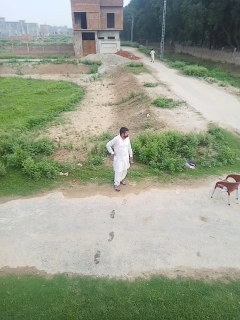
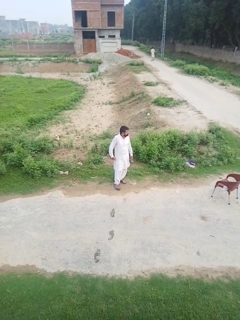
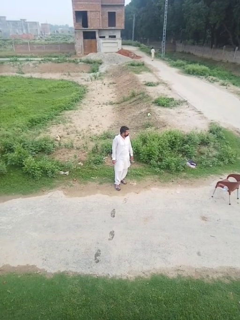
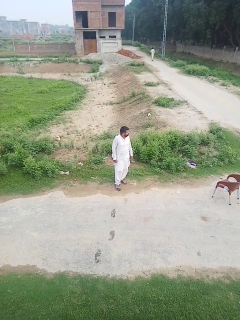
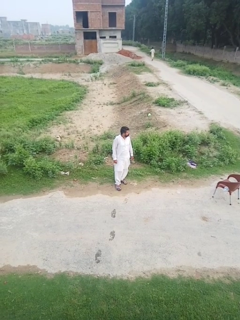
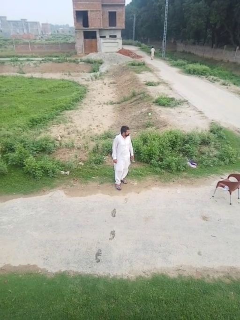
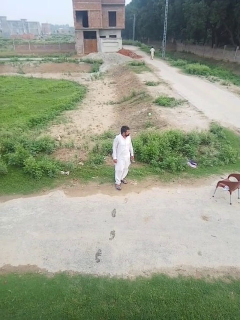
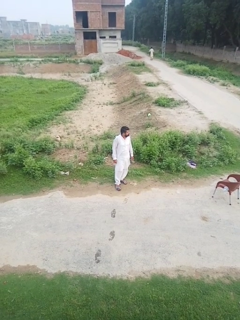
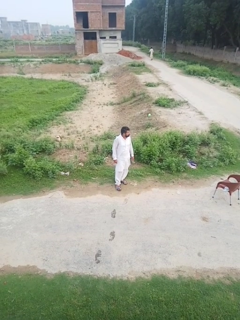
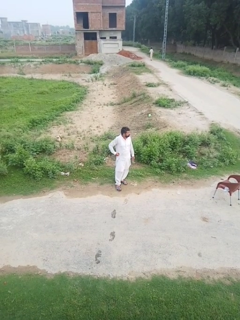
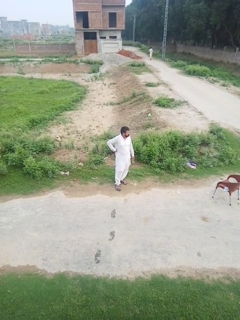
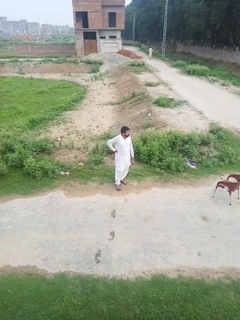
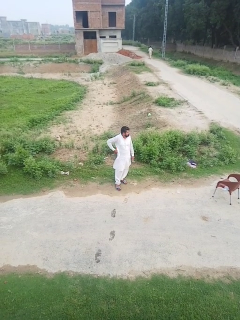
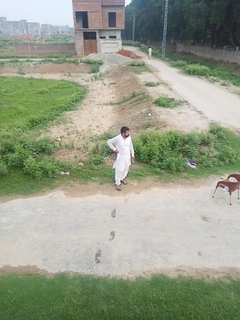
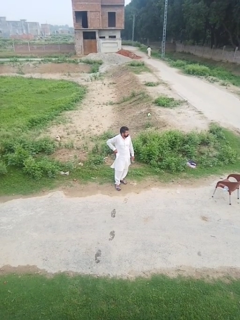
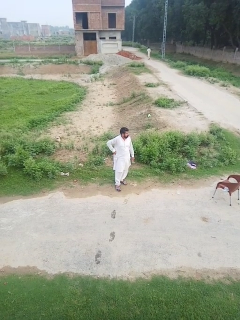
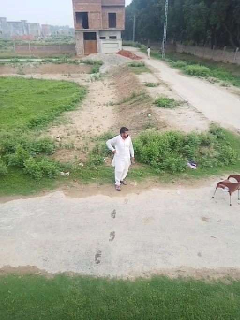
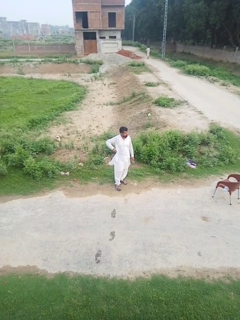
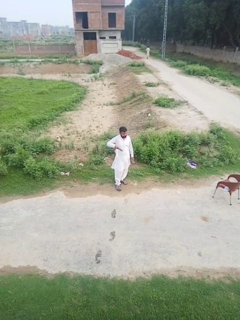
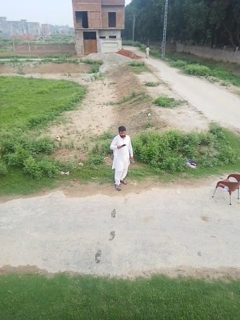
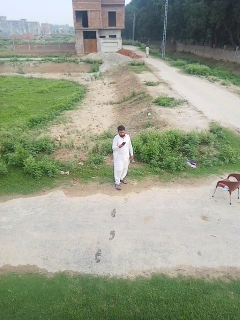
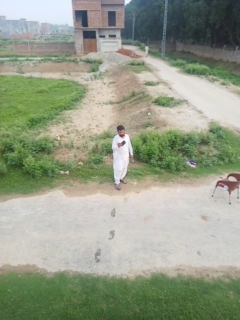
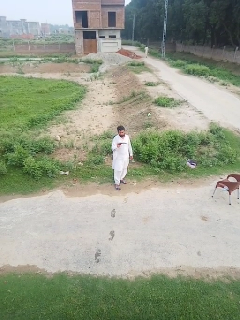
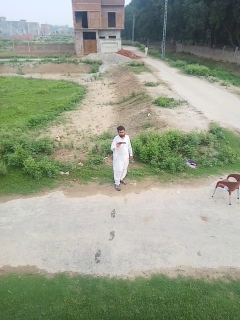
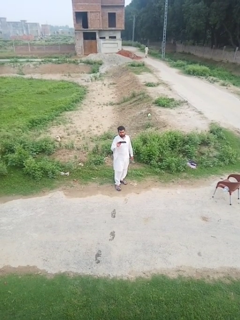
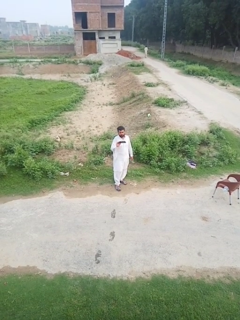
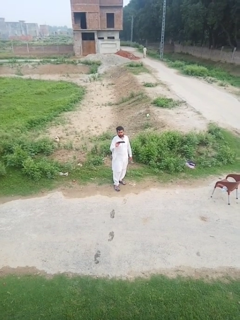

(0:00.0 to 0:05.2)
person takes phone from pocket

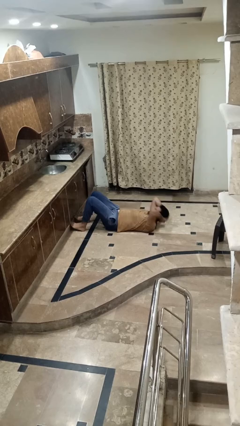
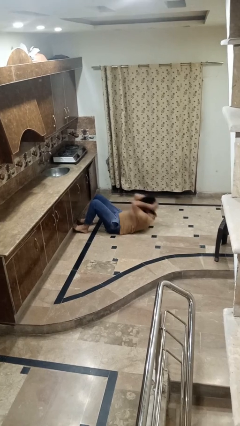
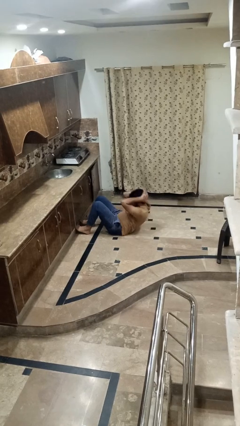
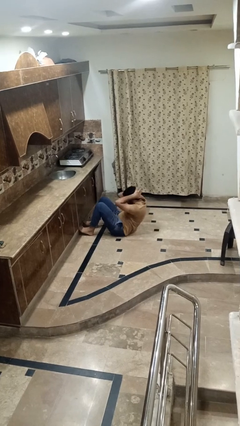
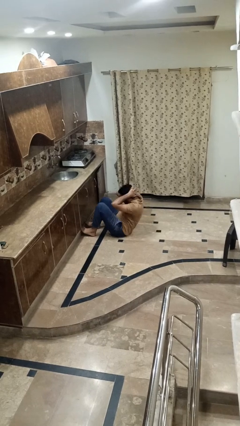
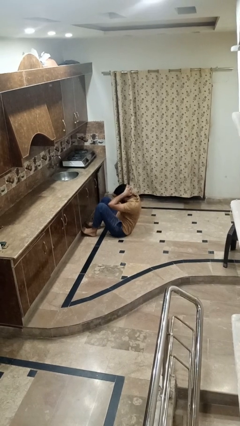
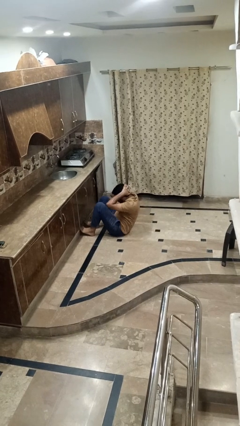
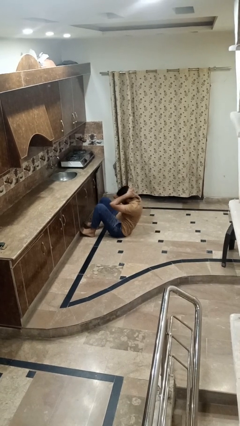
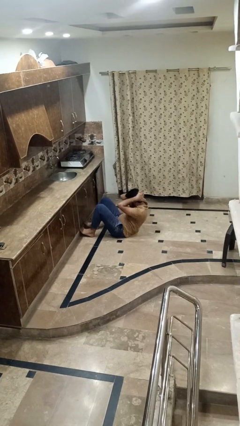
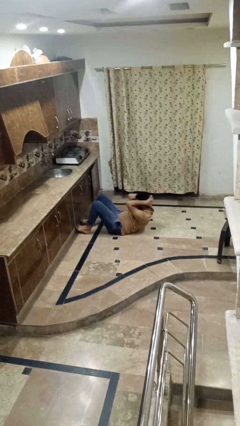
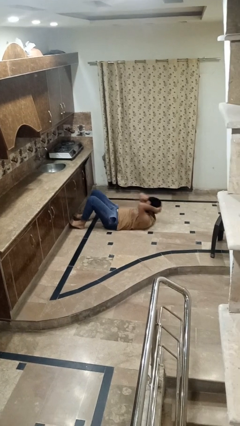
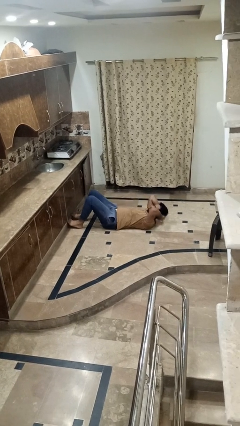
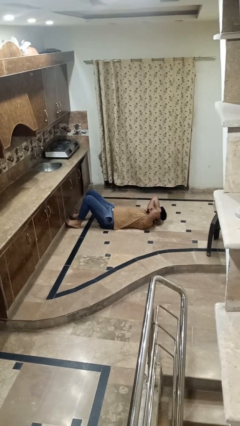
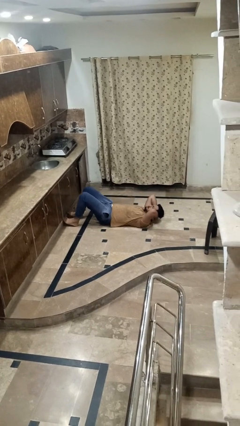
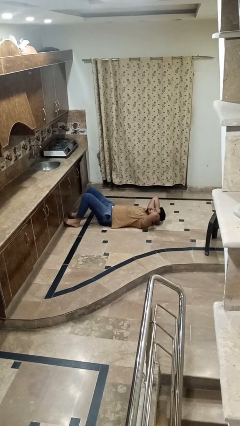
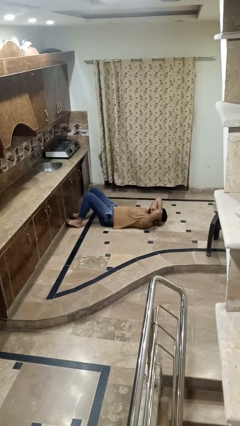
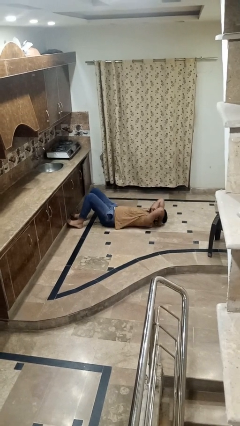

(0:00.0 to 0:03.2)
person exercises with situp

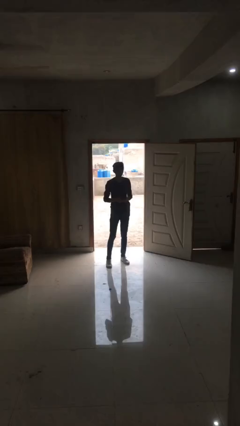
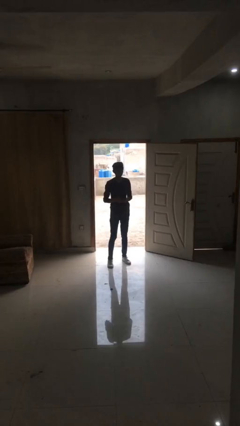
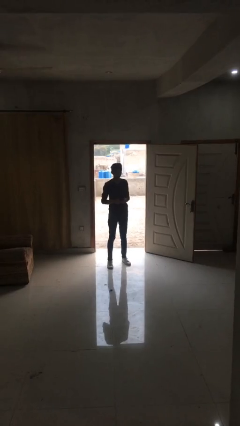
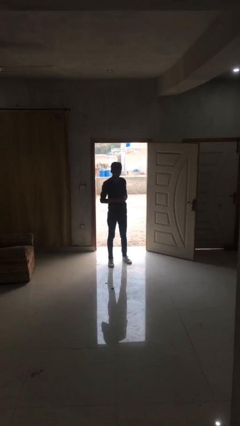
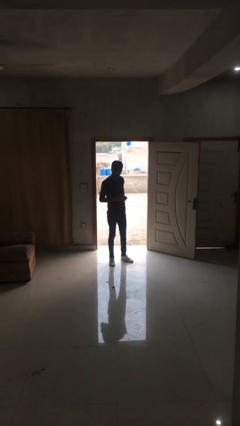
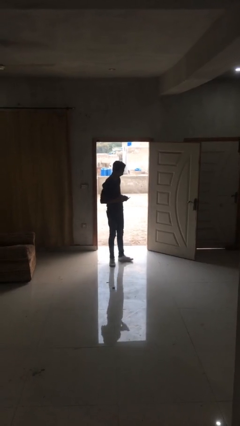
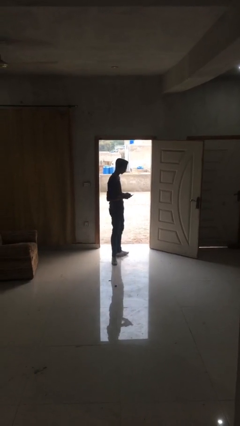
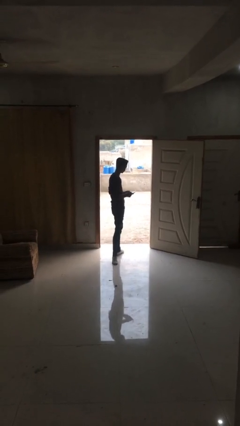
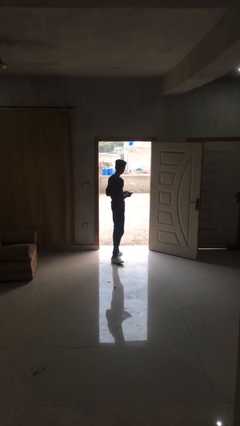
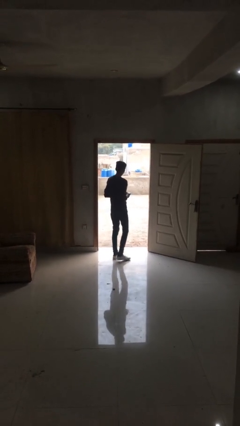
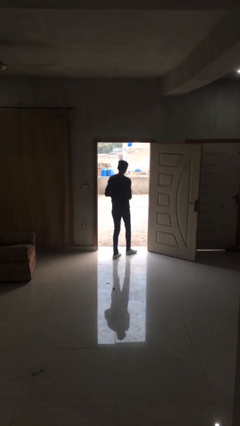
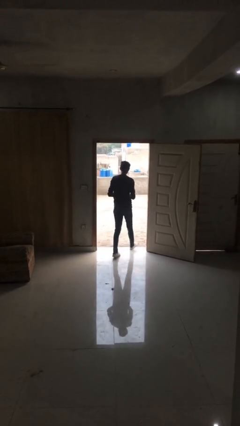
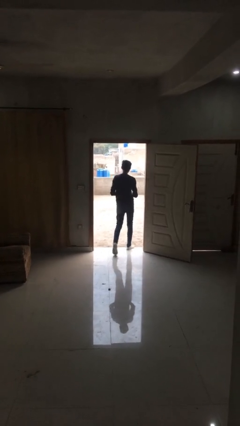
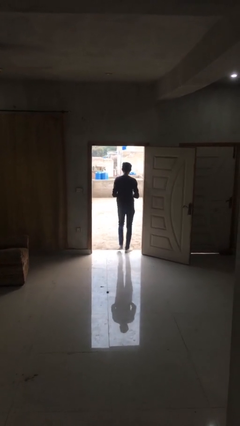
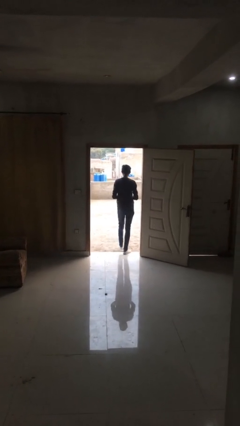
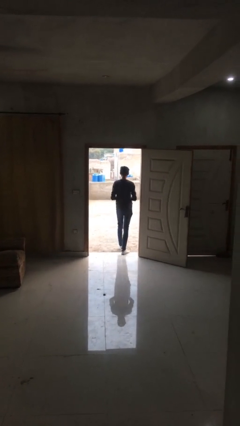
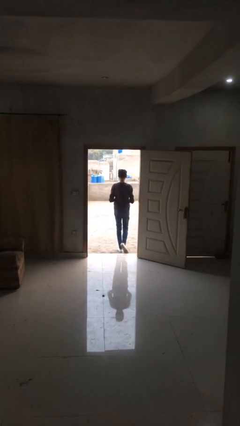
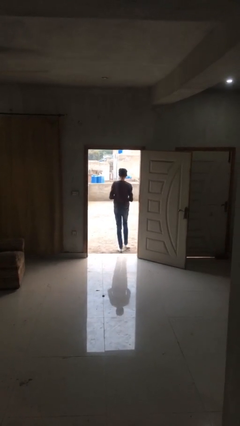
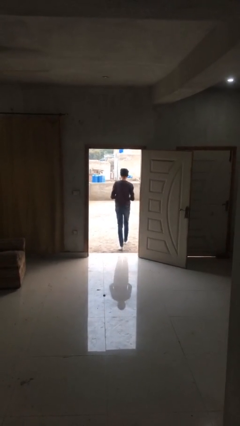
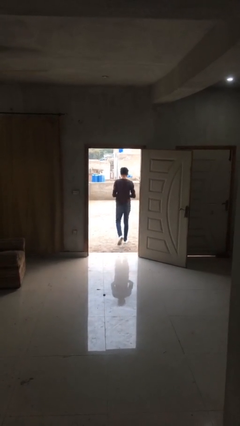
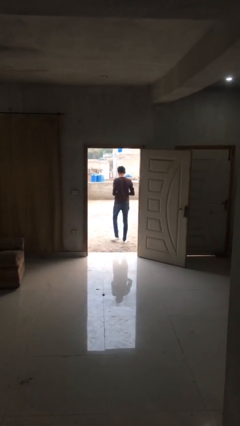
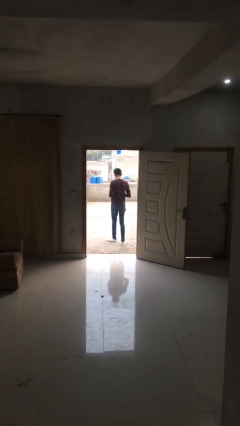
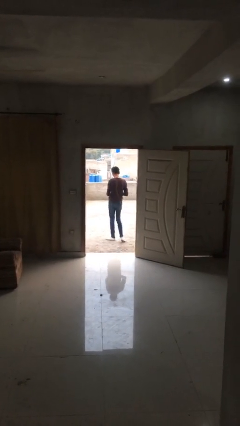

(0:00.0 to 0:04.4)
person exits scene through structure

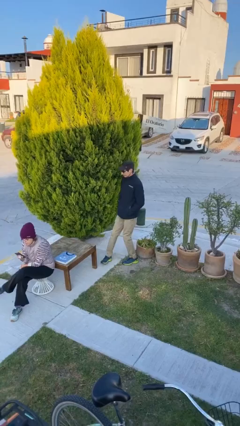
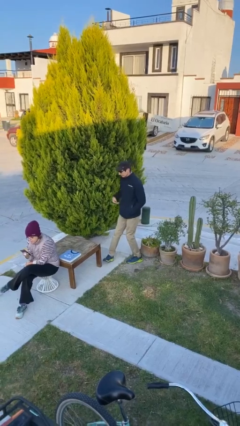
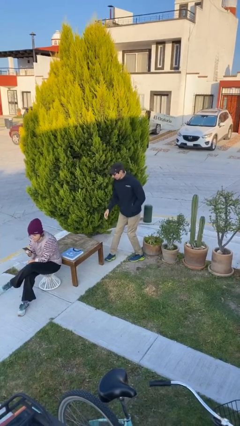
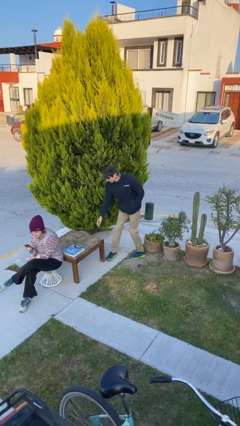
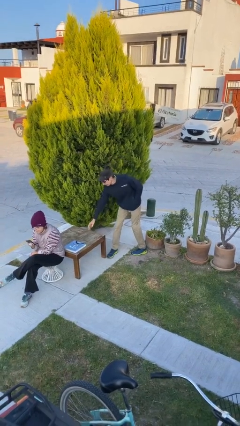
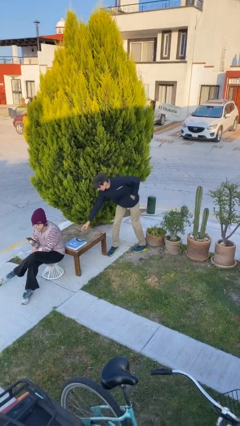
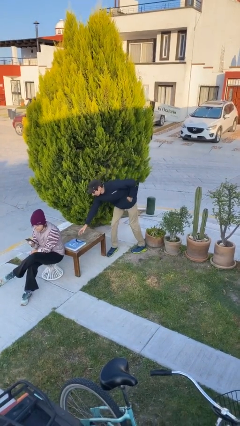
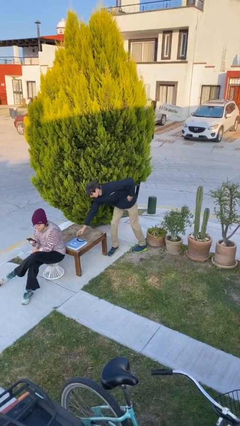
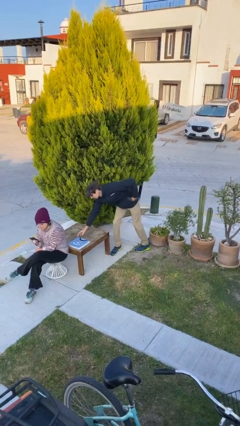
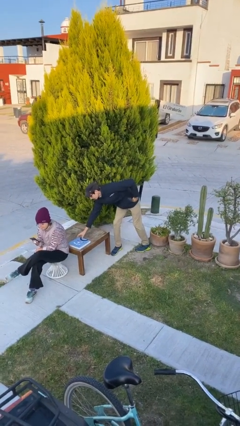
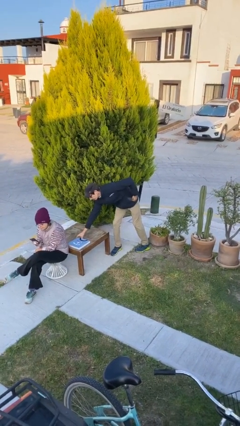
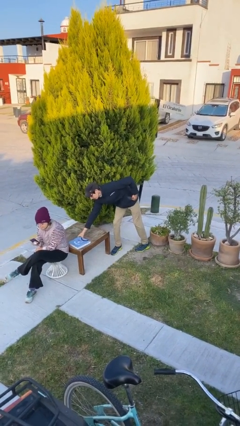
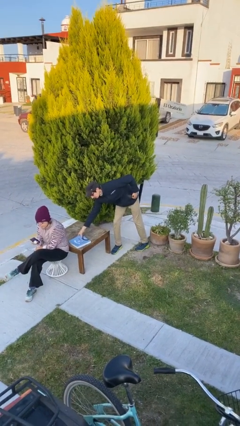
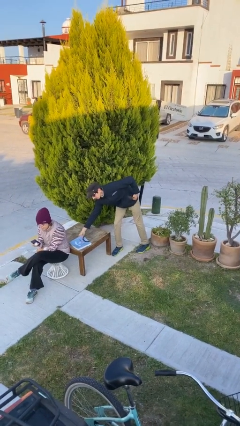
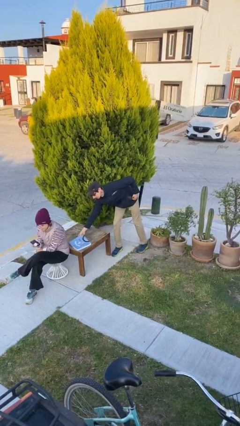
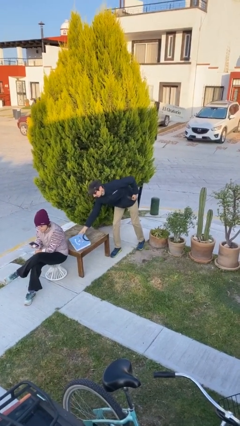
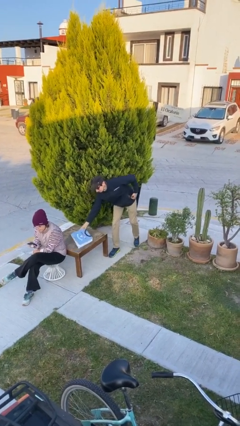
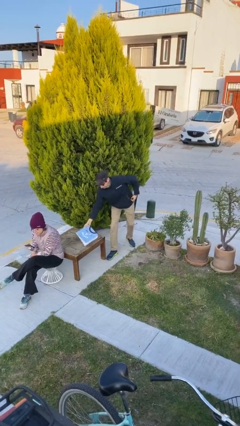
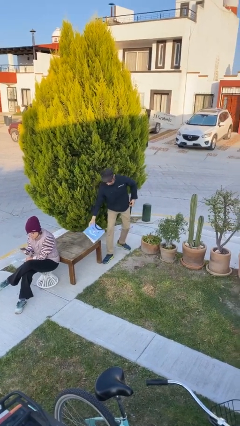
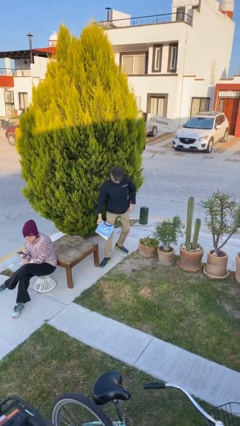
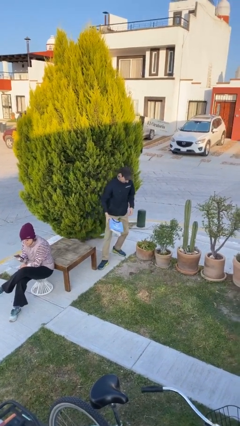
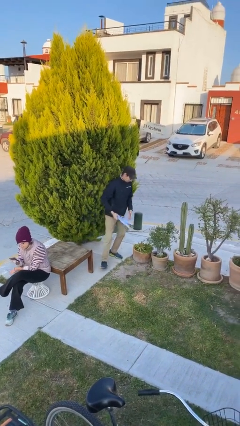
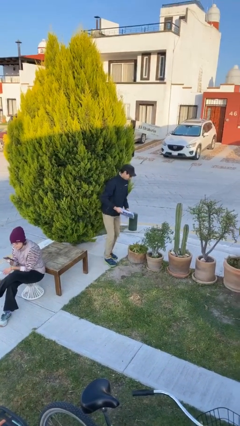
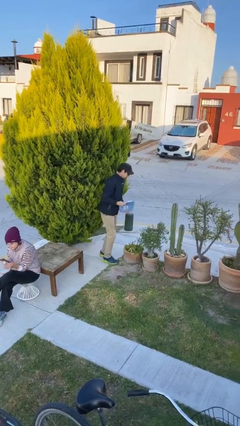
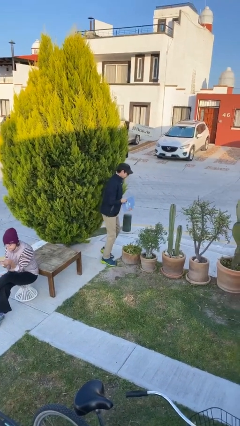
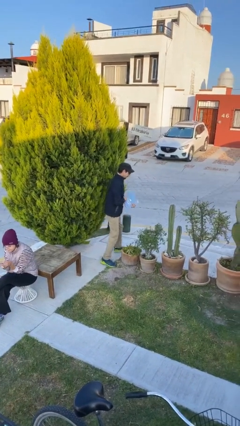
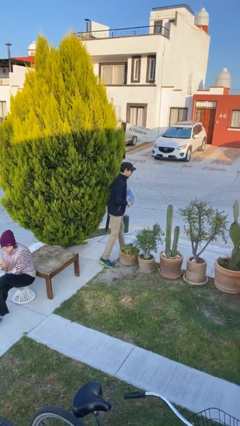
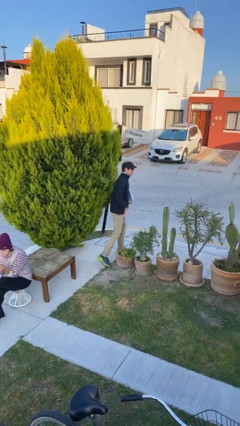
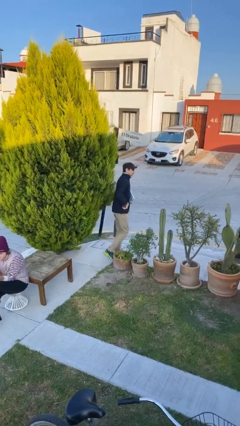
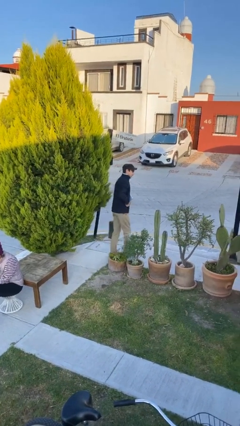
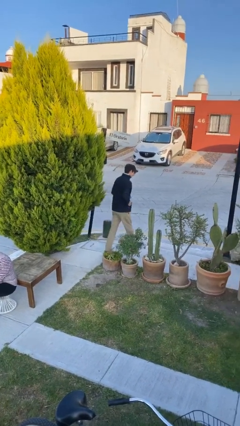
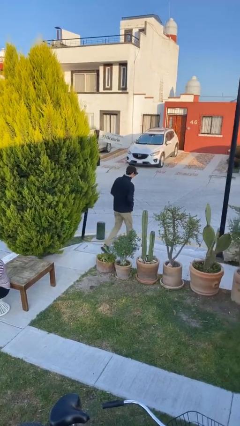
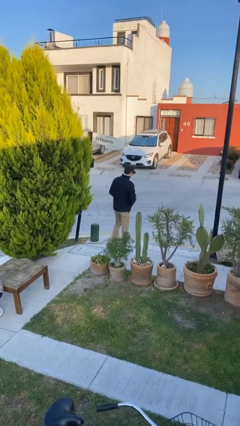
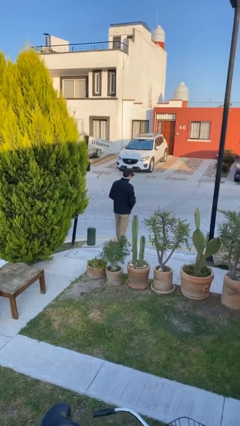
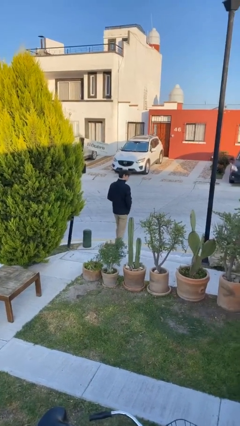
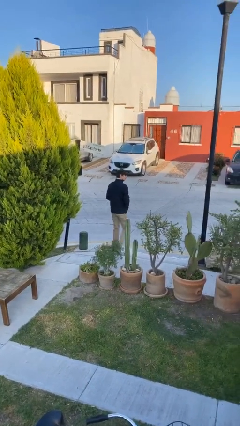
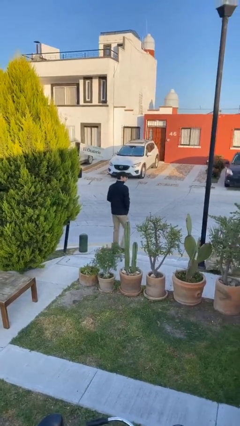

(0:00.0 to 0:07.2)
person steals object from person
